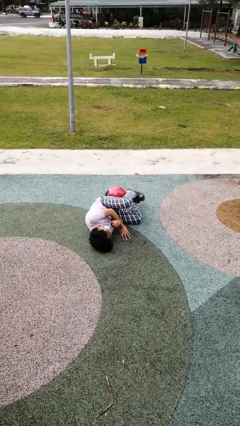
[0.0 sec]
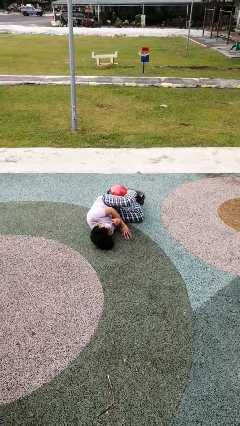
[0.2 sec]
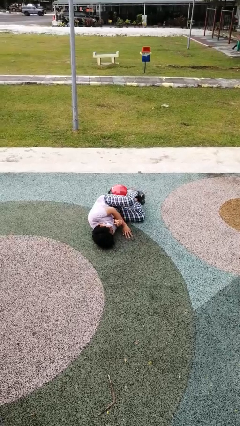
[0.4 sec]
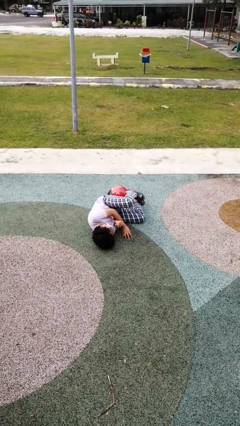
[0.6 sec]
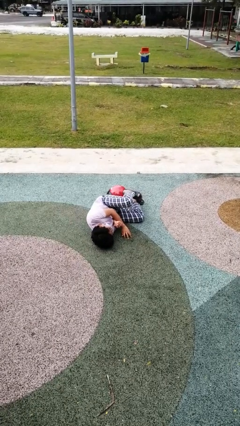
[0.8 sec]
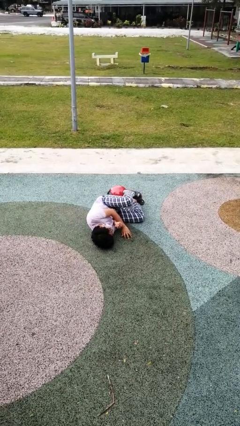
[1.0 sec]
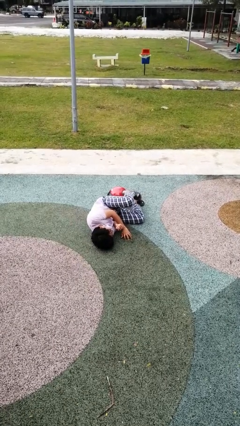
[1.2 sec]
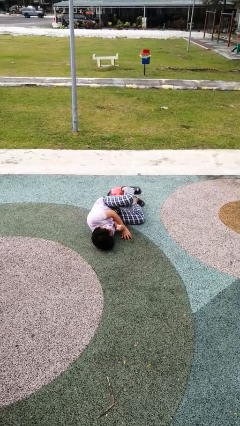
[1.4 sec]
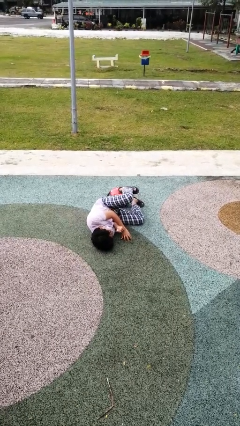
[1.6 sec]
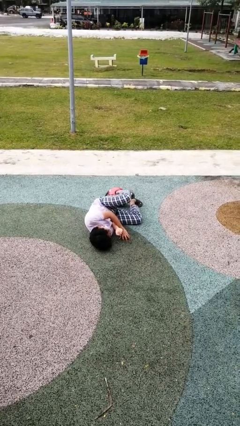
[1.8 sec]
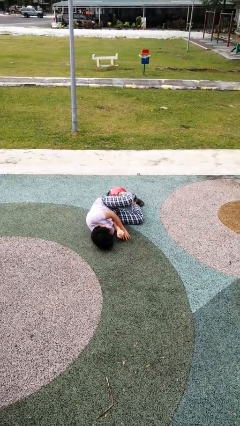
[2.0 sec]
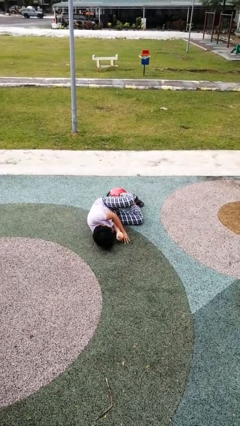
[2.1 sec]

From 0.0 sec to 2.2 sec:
person lies down on floor

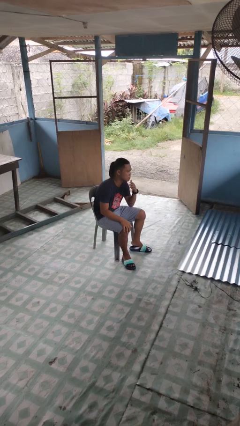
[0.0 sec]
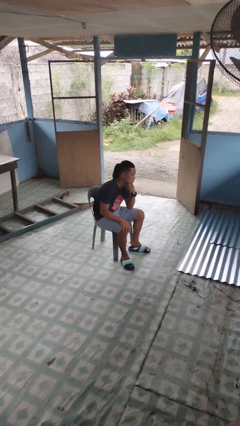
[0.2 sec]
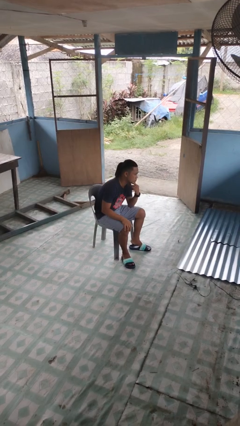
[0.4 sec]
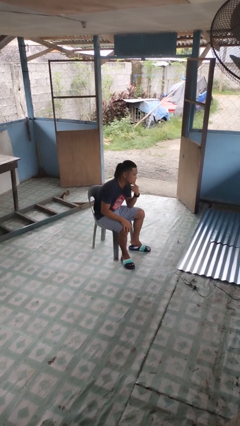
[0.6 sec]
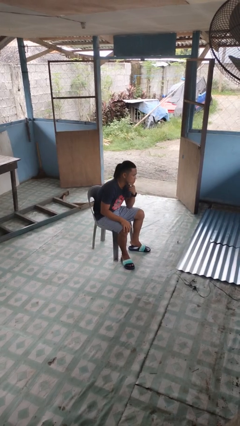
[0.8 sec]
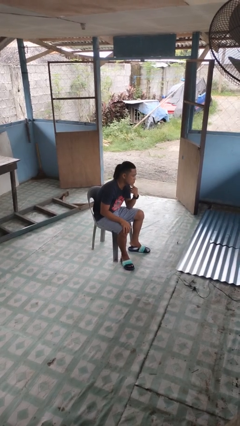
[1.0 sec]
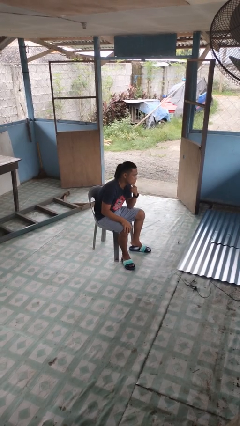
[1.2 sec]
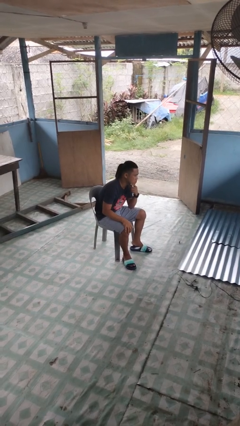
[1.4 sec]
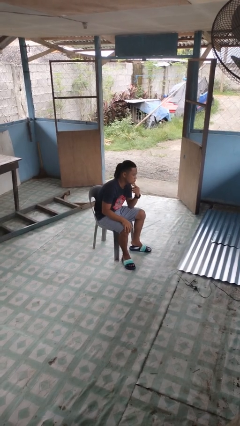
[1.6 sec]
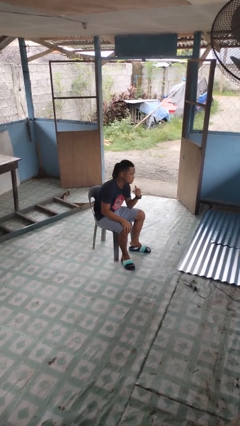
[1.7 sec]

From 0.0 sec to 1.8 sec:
person strokes chin

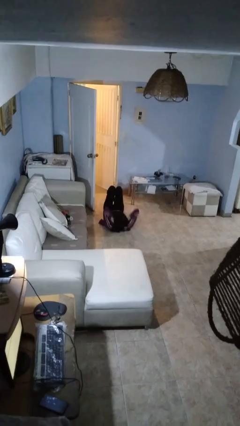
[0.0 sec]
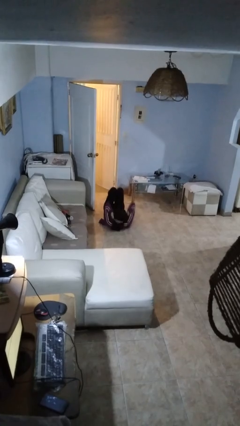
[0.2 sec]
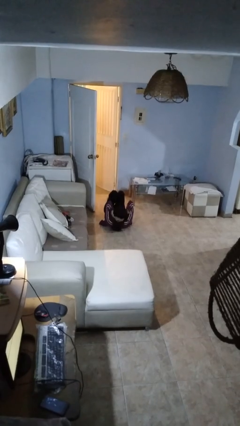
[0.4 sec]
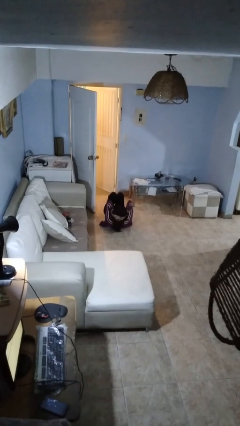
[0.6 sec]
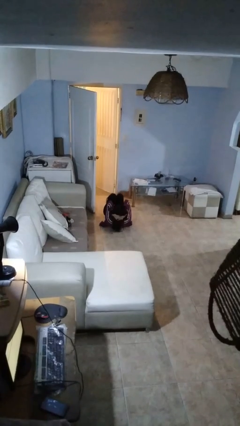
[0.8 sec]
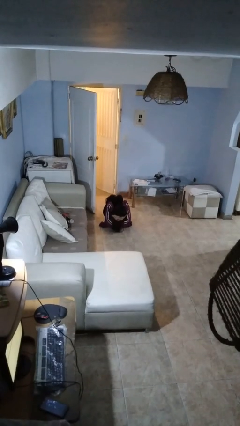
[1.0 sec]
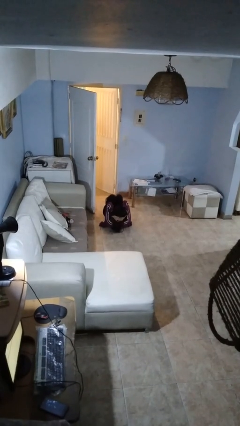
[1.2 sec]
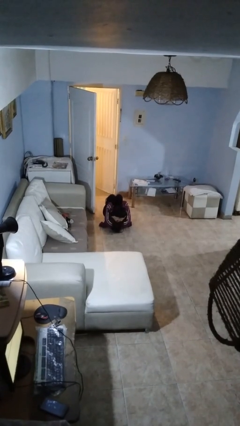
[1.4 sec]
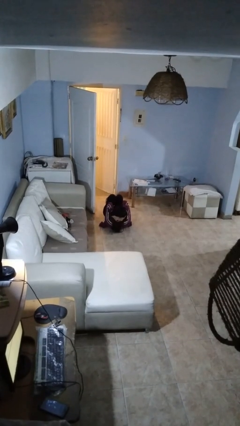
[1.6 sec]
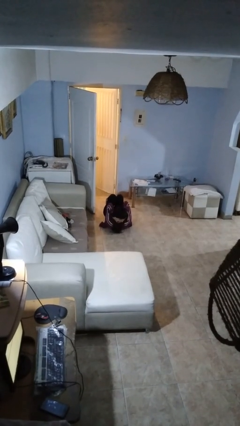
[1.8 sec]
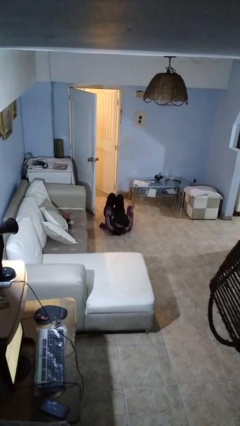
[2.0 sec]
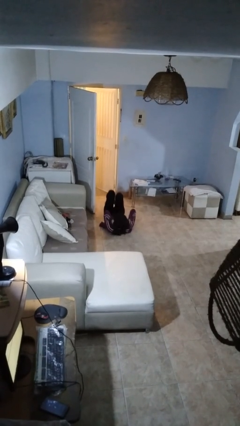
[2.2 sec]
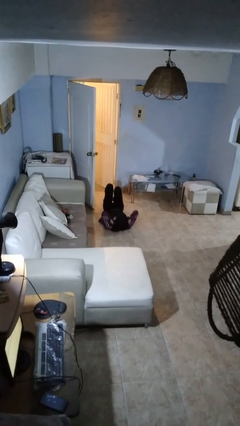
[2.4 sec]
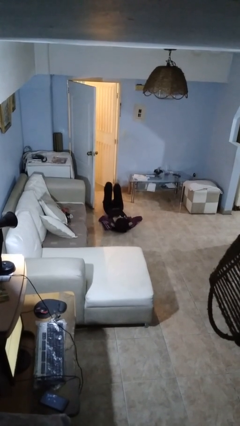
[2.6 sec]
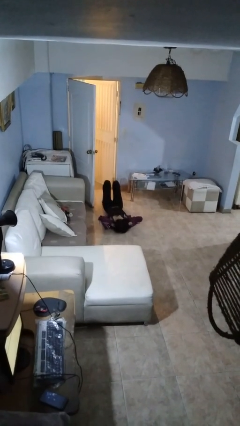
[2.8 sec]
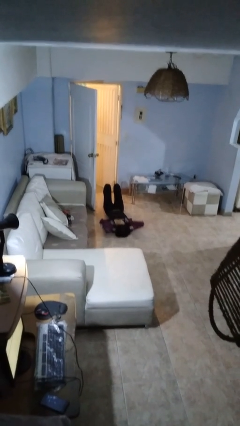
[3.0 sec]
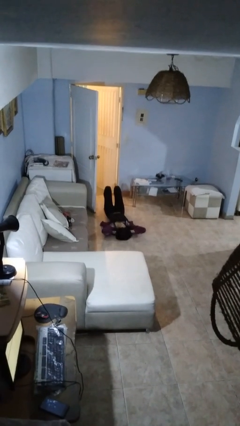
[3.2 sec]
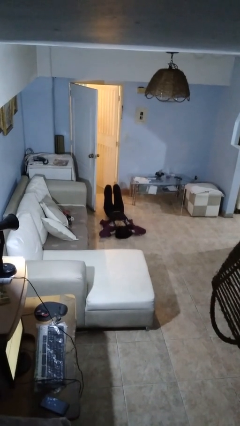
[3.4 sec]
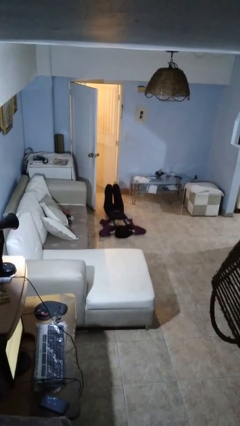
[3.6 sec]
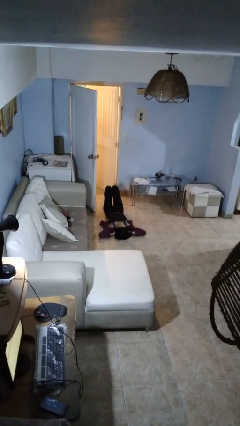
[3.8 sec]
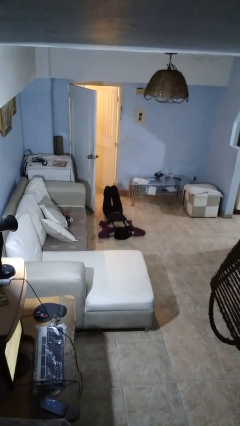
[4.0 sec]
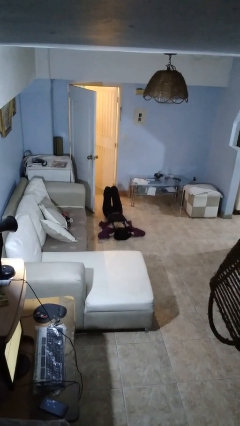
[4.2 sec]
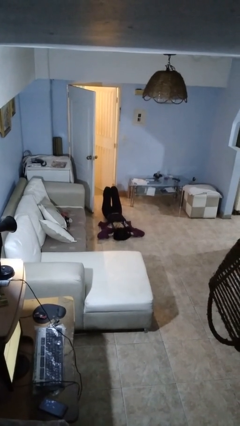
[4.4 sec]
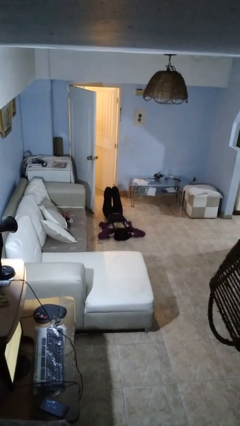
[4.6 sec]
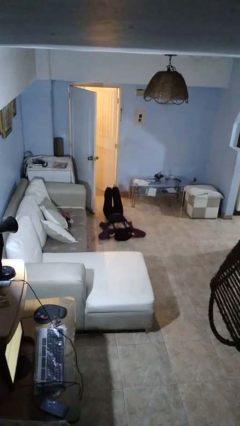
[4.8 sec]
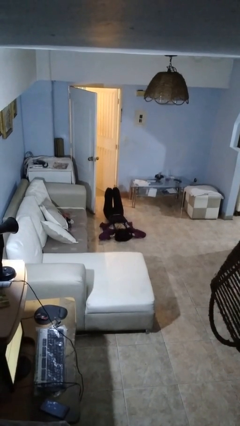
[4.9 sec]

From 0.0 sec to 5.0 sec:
person exercises with situp

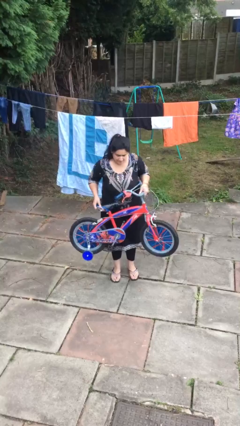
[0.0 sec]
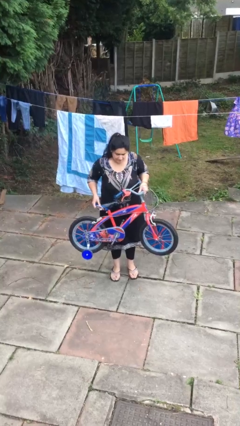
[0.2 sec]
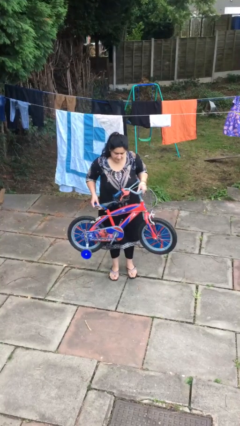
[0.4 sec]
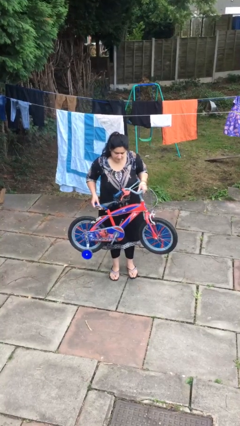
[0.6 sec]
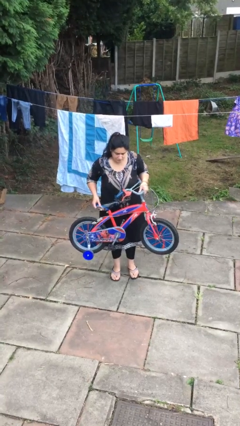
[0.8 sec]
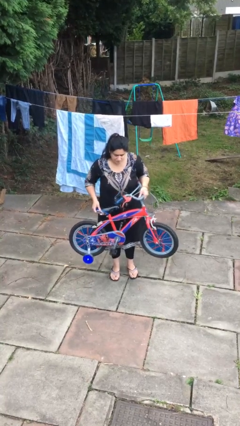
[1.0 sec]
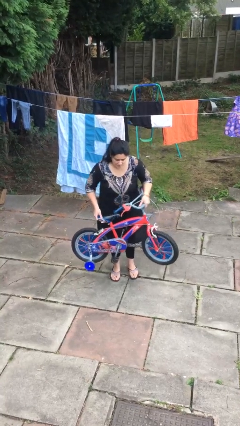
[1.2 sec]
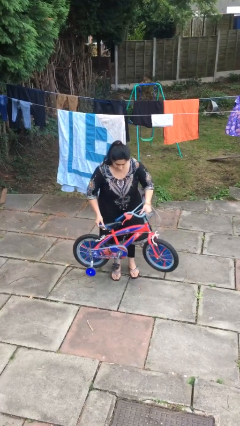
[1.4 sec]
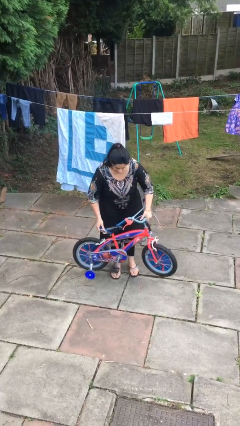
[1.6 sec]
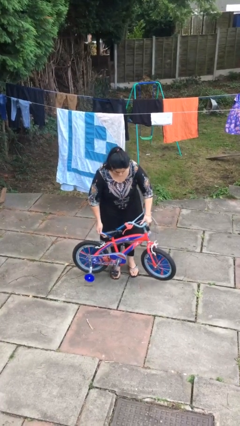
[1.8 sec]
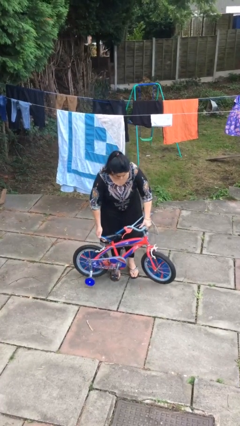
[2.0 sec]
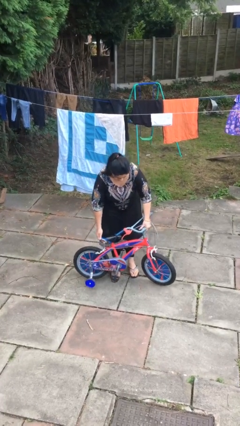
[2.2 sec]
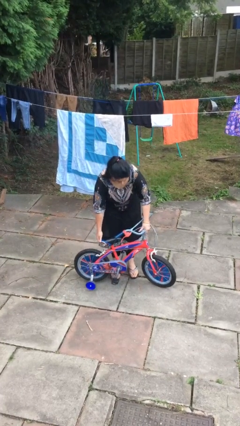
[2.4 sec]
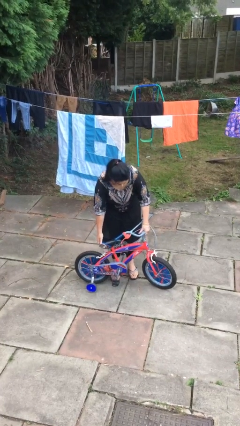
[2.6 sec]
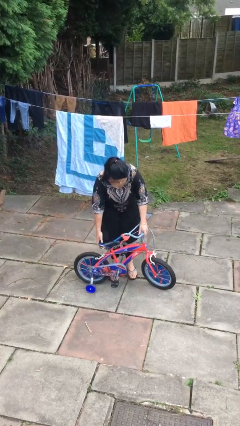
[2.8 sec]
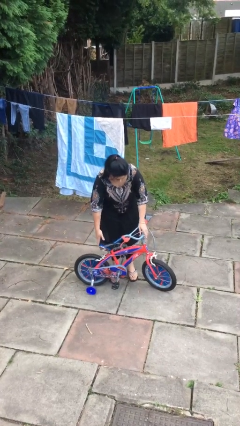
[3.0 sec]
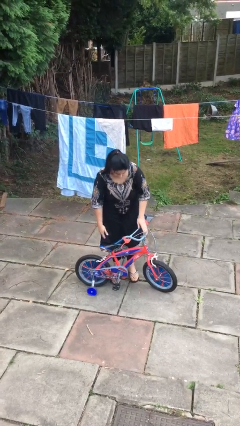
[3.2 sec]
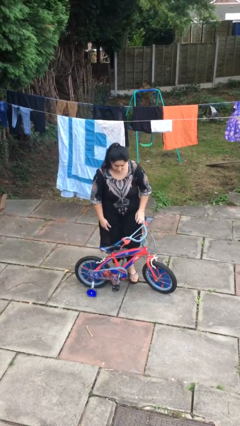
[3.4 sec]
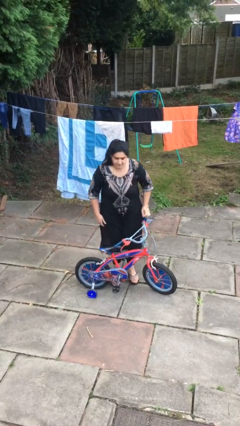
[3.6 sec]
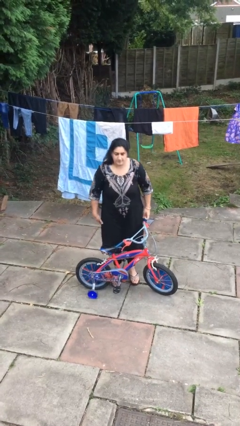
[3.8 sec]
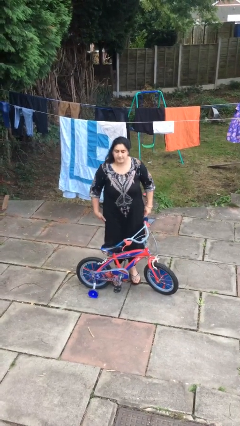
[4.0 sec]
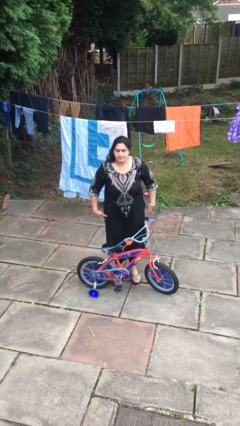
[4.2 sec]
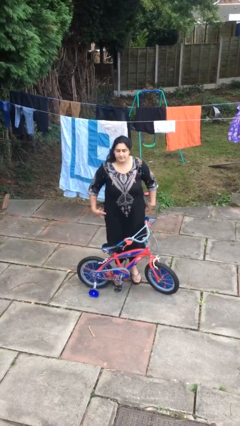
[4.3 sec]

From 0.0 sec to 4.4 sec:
person puts down object on floor

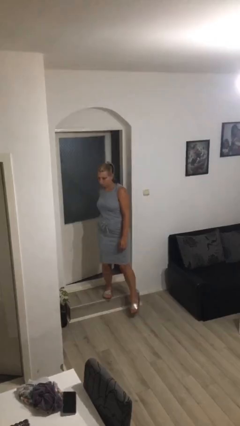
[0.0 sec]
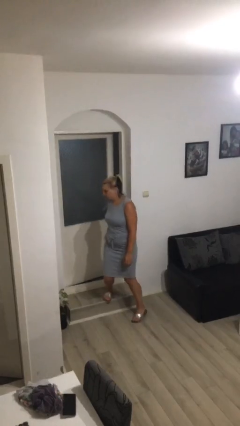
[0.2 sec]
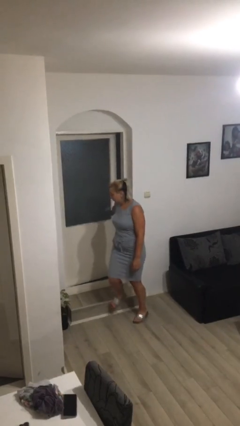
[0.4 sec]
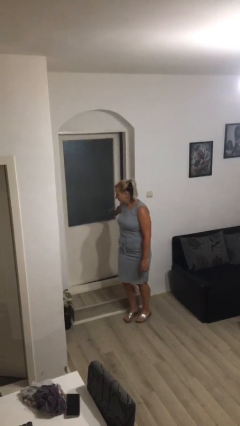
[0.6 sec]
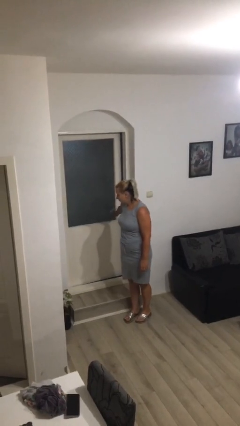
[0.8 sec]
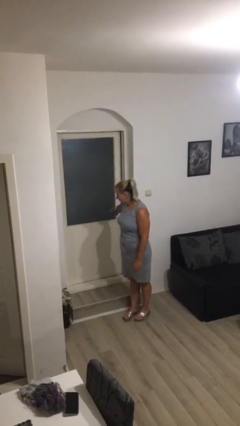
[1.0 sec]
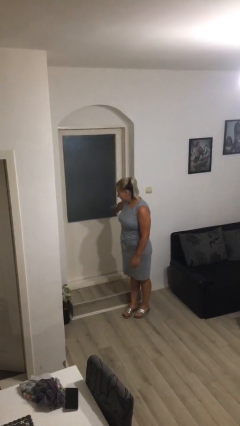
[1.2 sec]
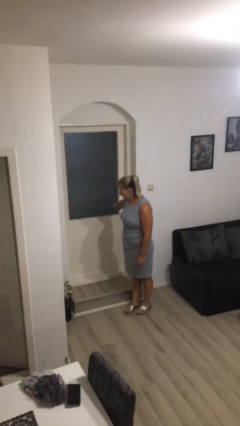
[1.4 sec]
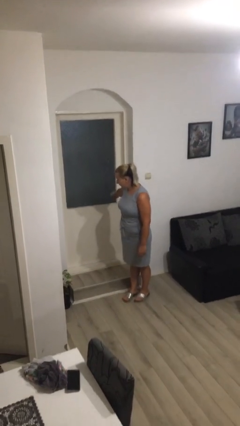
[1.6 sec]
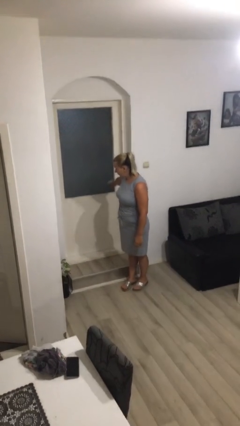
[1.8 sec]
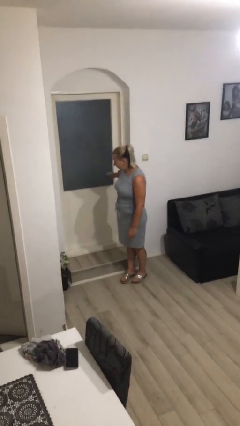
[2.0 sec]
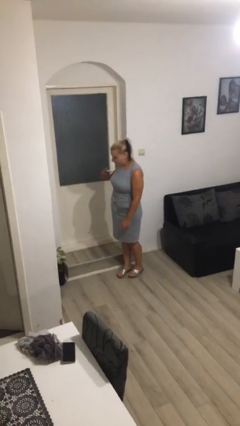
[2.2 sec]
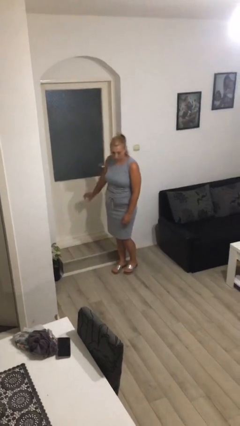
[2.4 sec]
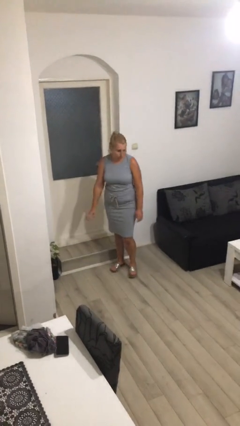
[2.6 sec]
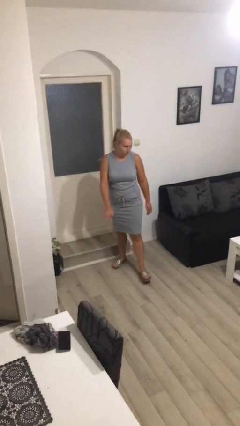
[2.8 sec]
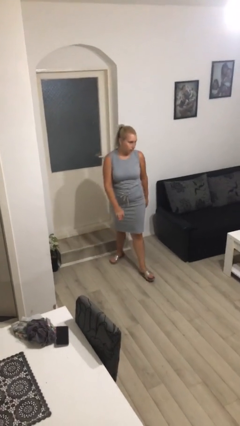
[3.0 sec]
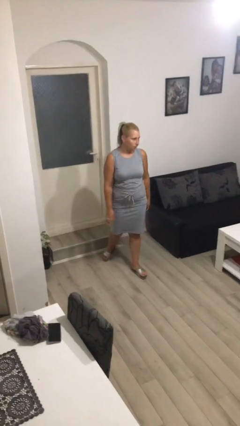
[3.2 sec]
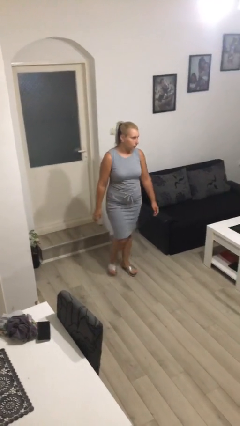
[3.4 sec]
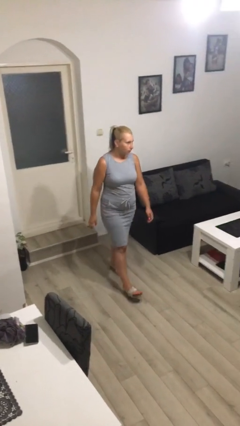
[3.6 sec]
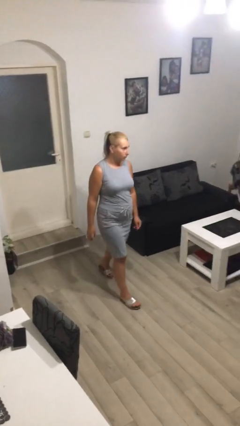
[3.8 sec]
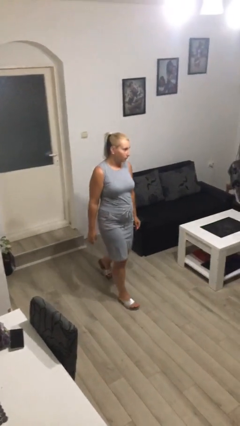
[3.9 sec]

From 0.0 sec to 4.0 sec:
person closes facility door
